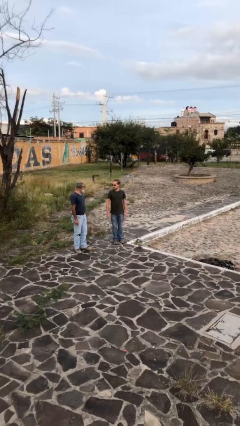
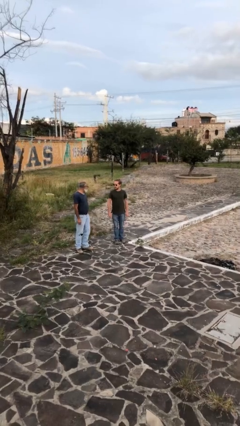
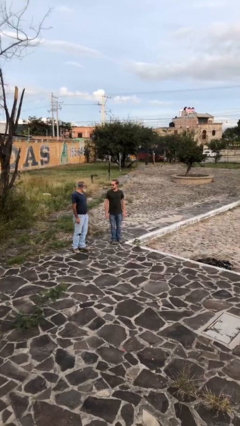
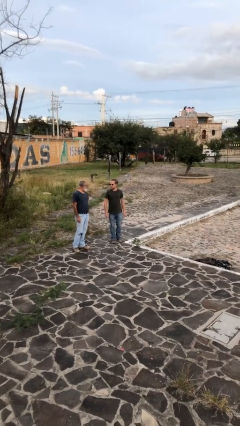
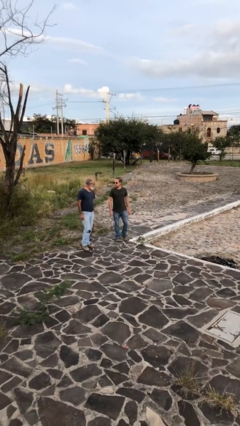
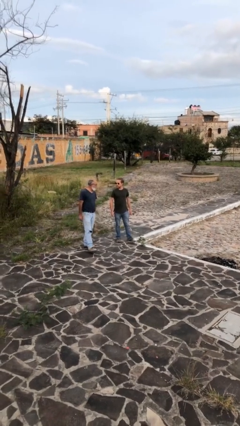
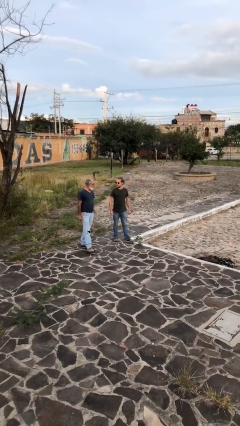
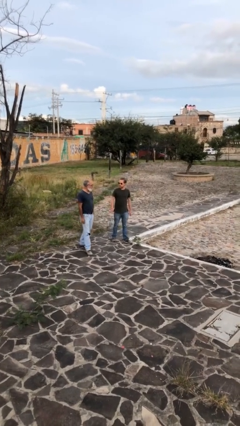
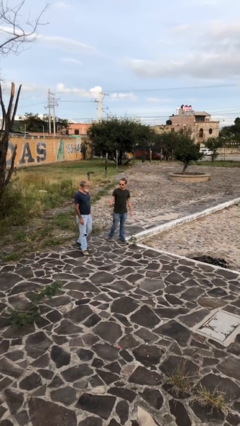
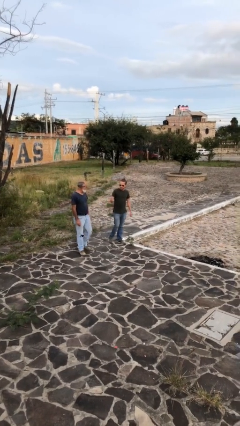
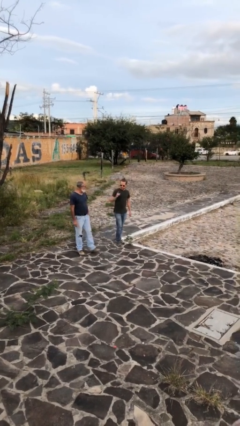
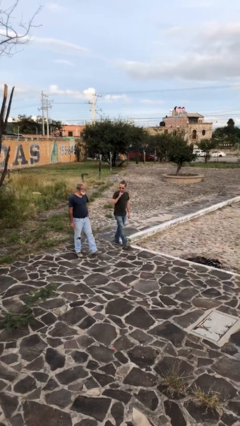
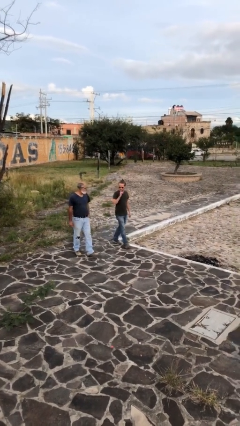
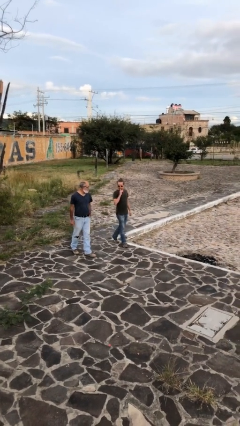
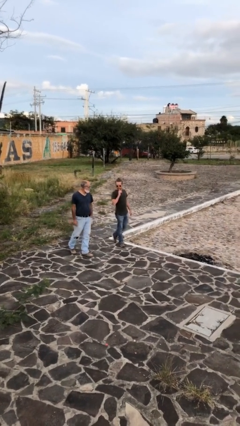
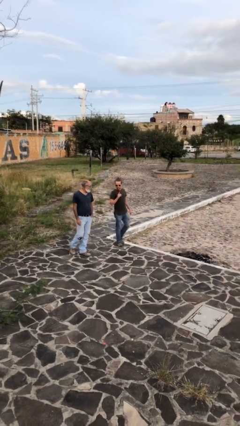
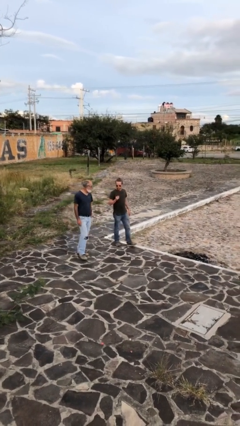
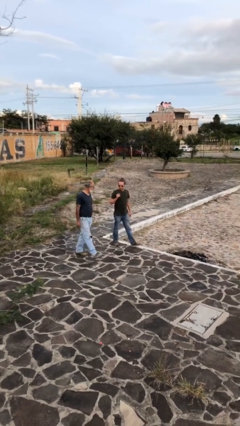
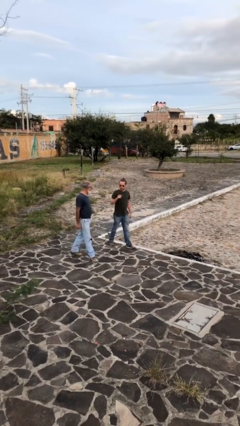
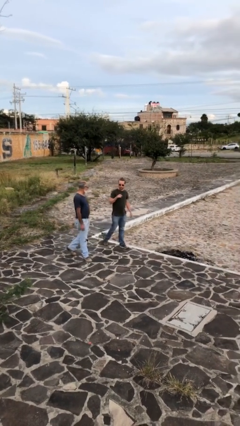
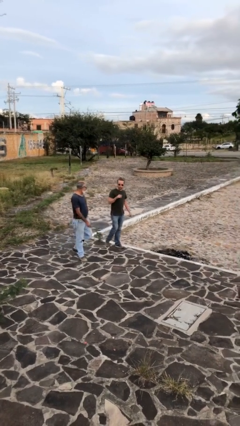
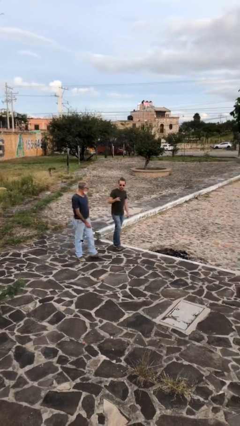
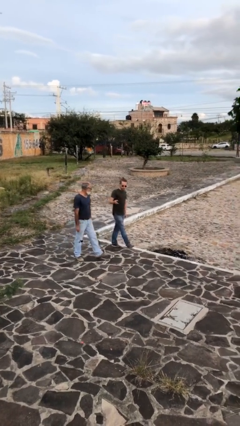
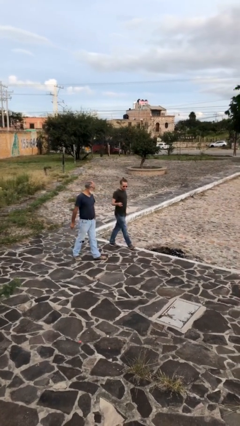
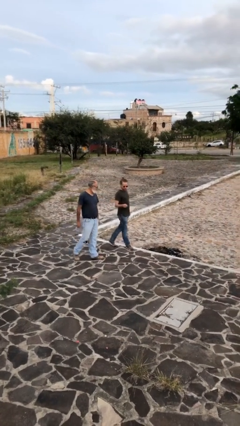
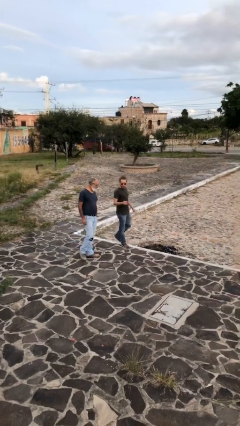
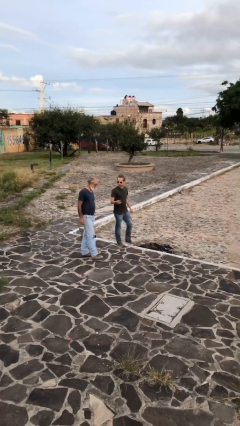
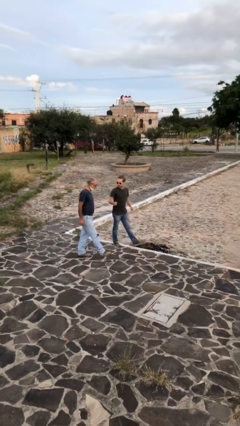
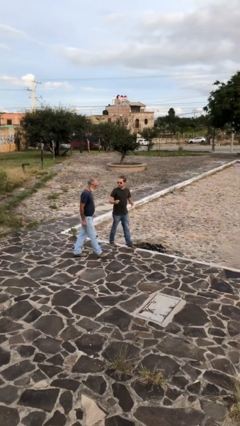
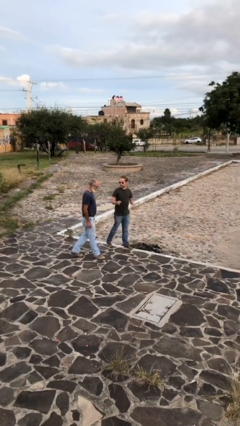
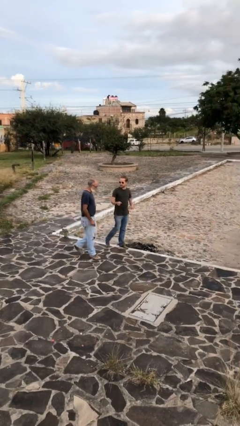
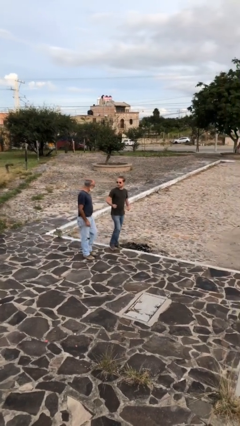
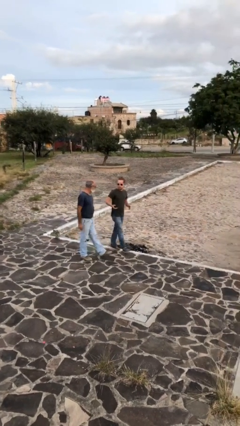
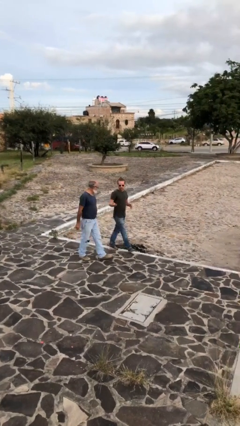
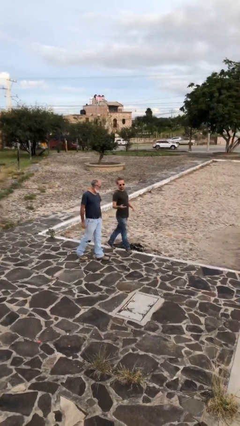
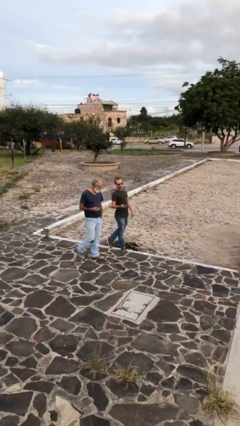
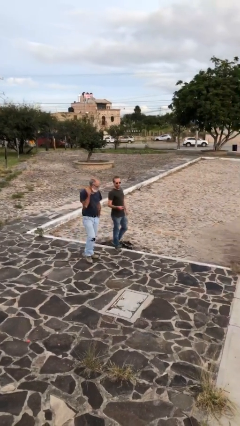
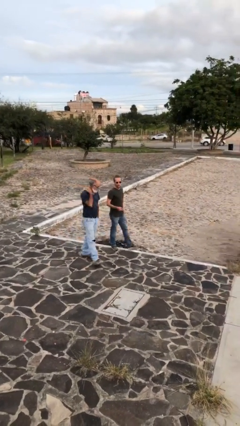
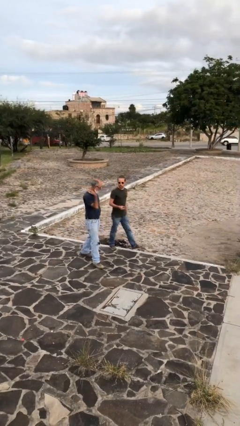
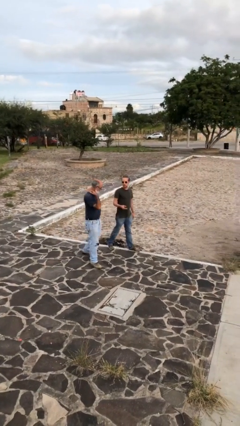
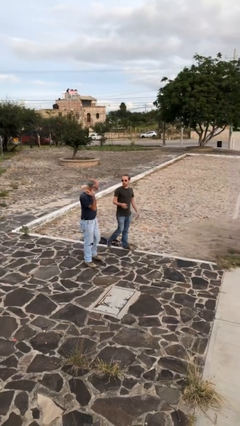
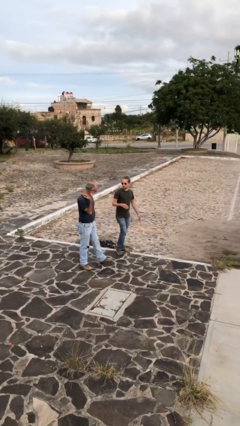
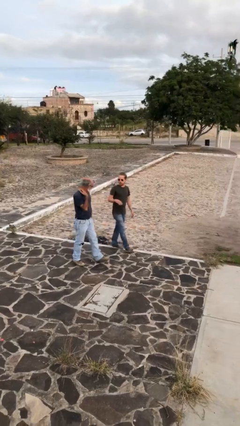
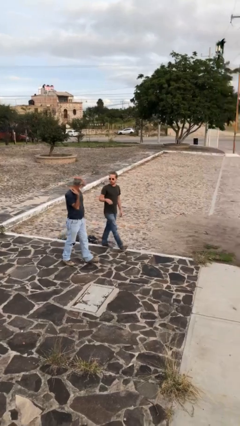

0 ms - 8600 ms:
person talks to person

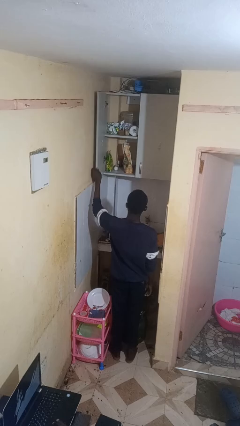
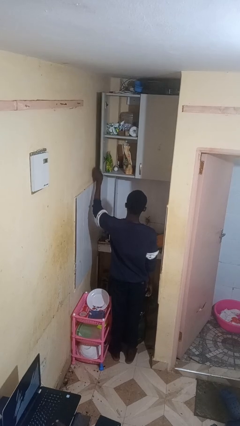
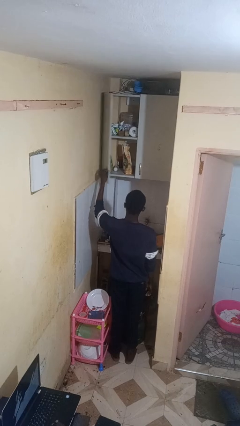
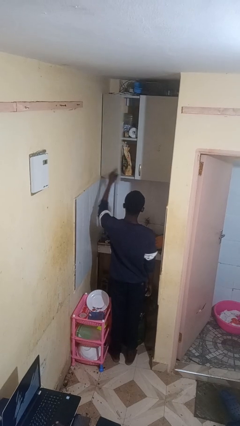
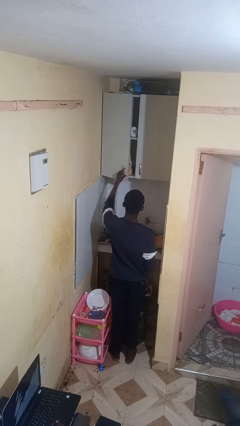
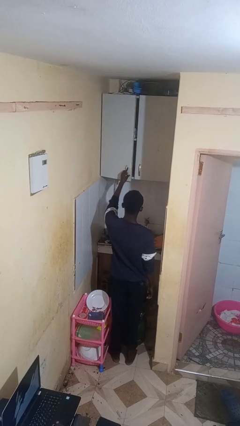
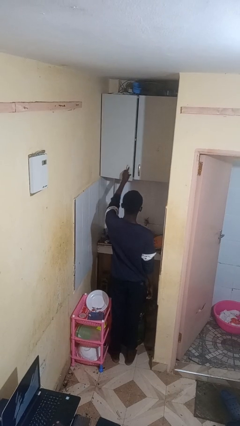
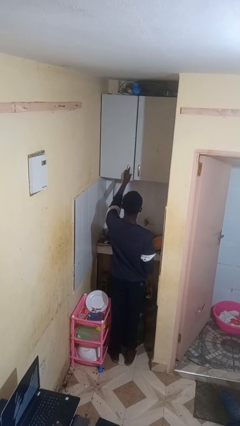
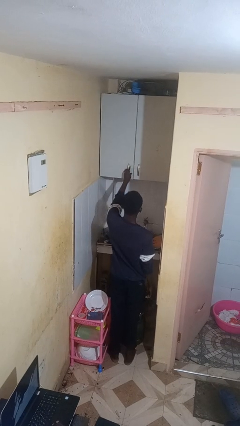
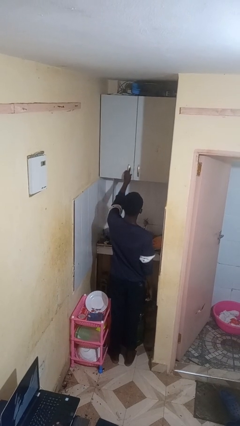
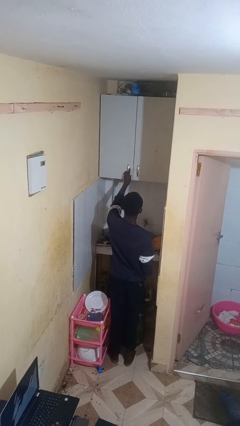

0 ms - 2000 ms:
person closes cabinet

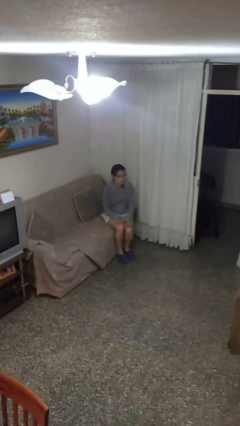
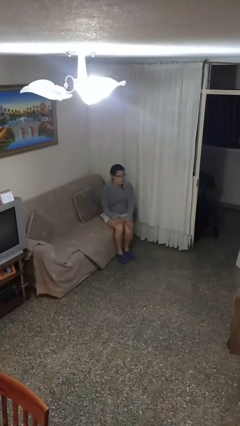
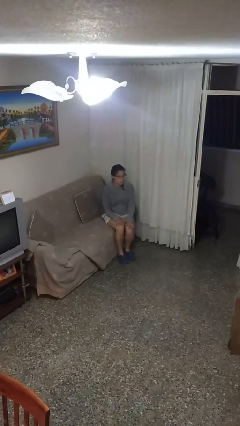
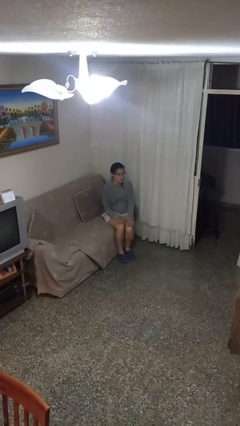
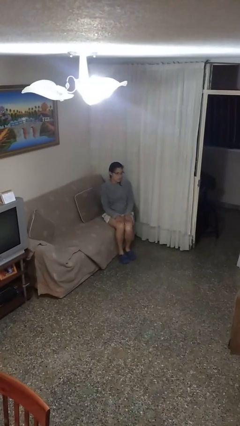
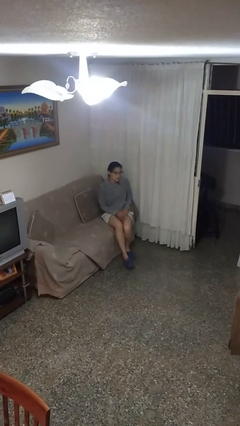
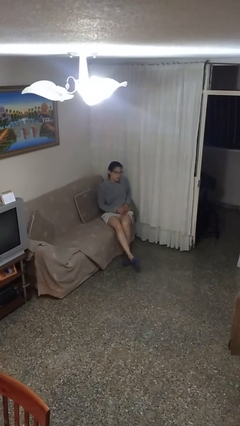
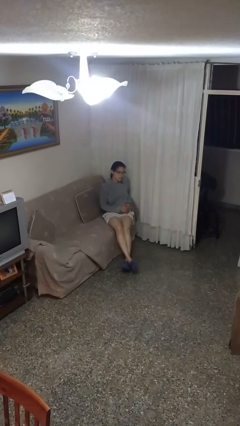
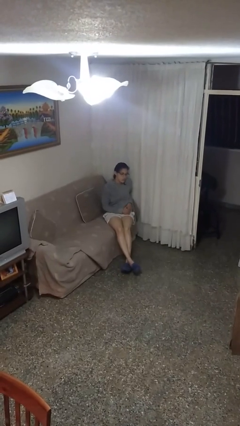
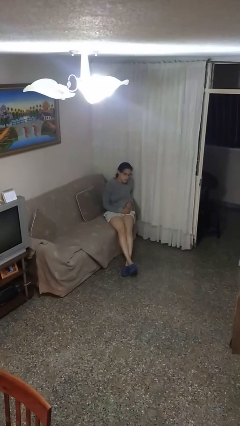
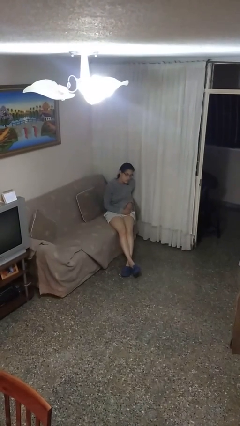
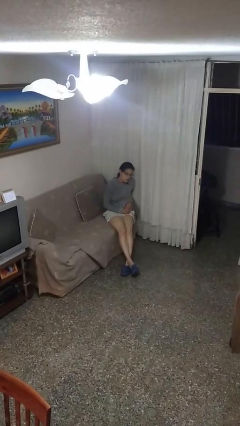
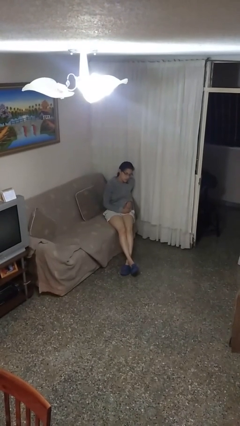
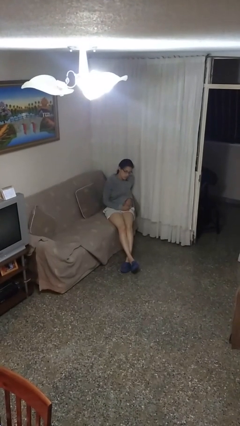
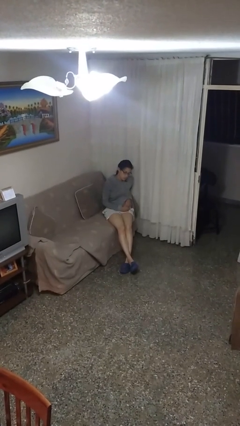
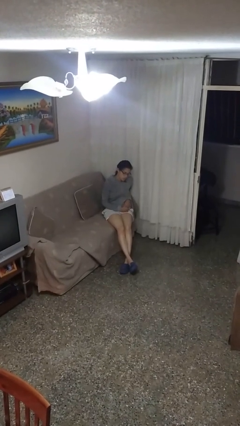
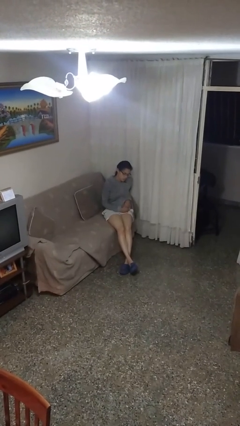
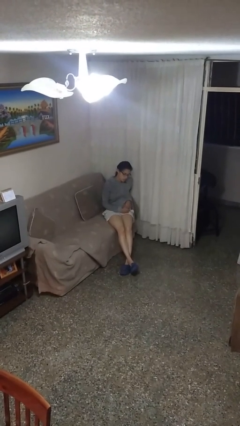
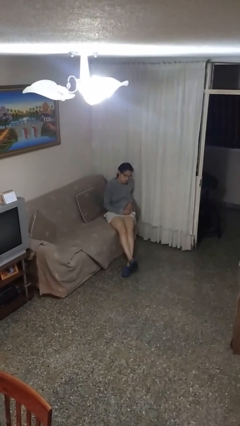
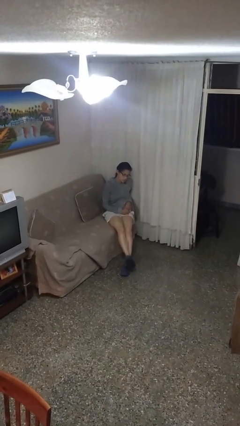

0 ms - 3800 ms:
person crosses legs

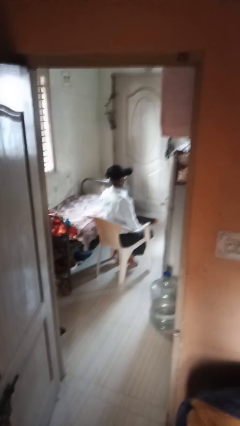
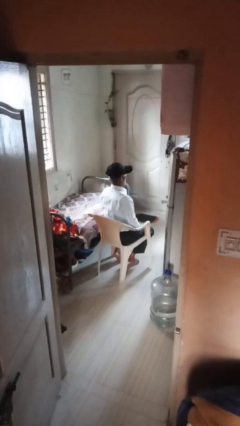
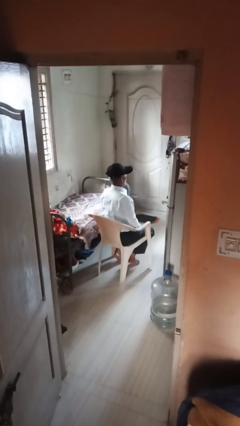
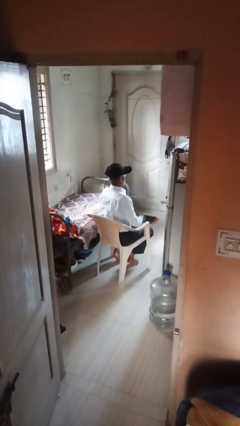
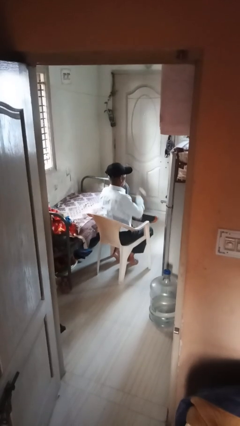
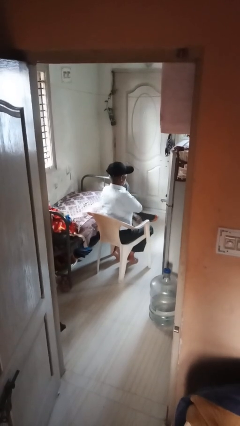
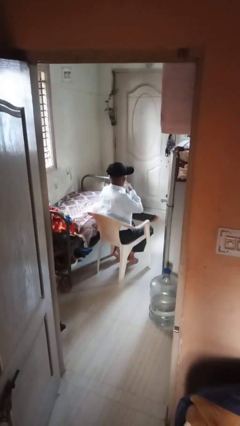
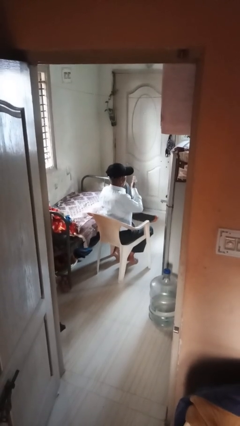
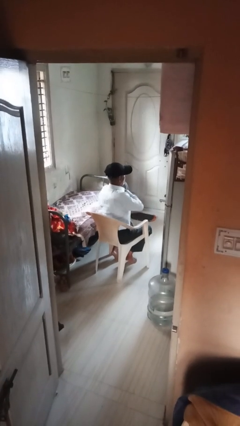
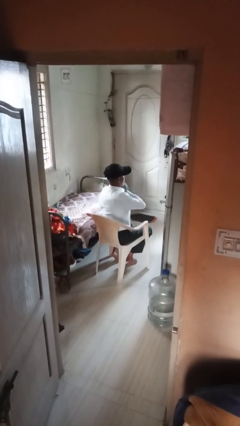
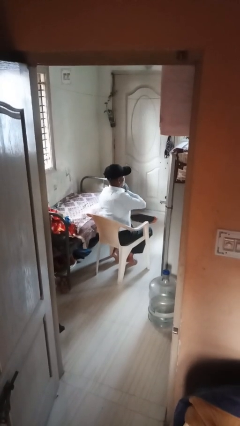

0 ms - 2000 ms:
person drums on chest

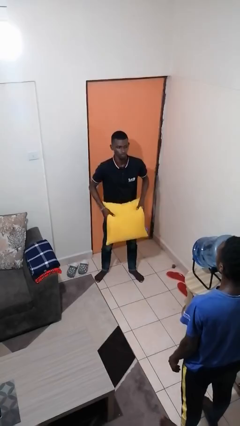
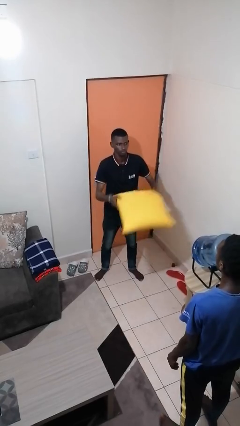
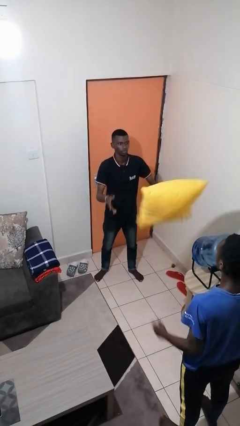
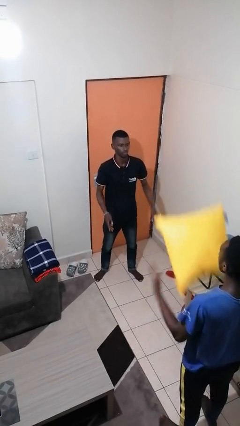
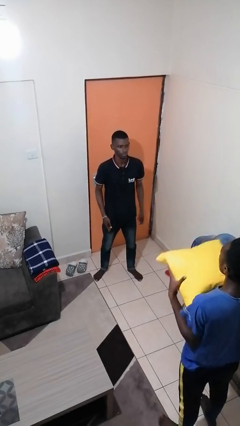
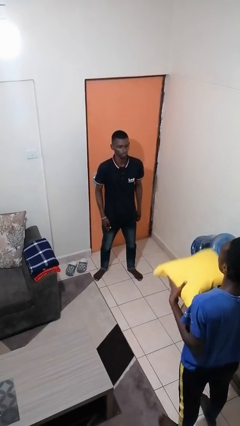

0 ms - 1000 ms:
person throws object to person

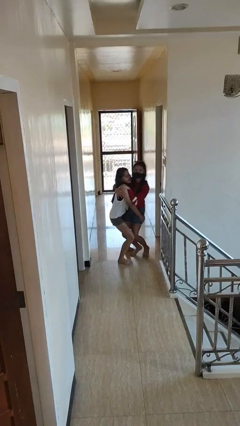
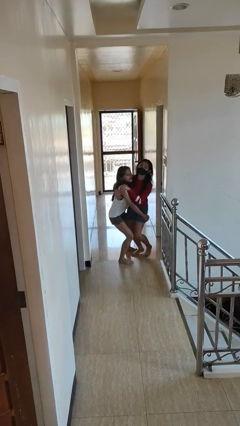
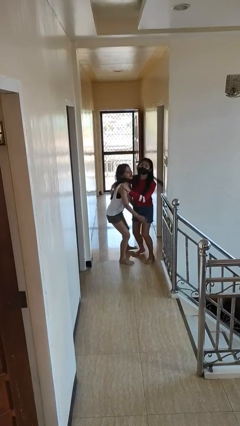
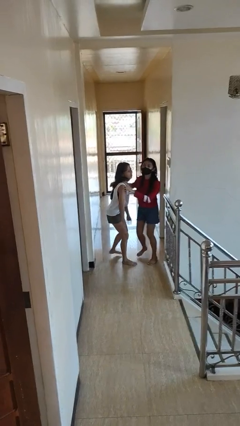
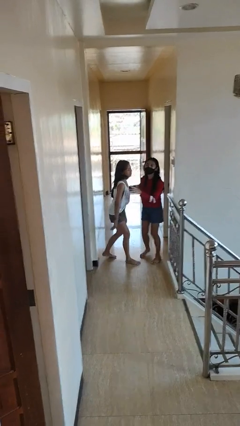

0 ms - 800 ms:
person puts down person
